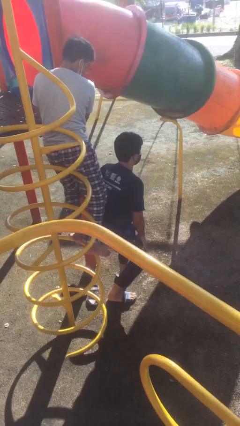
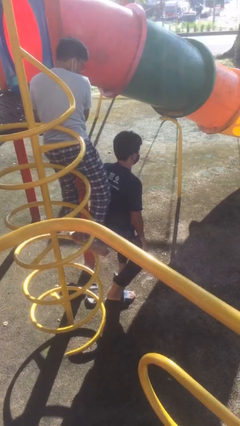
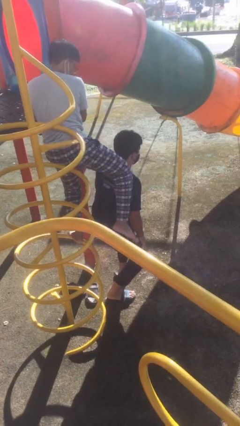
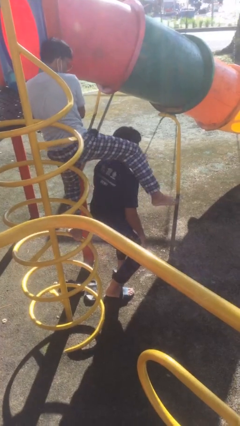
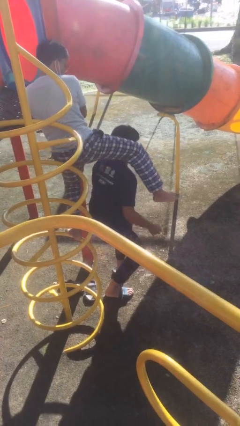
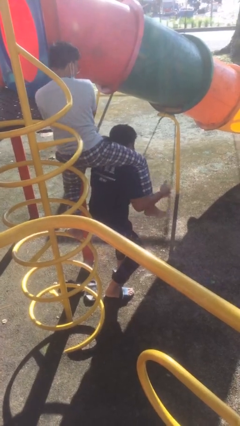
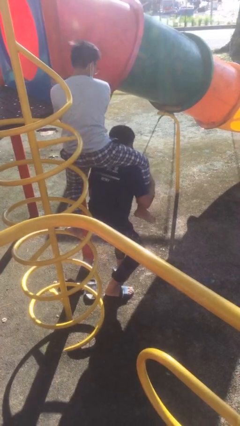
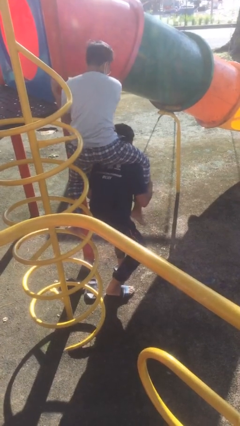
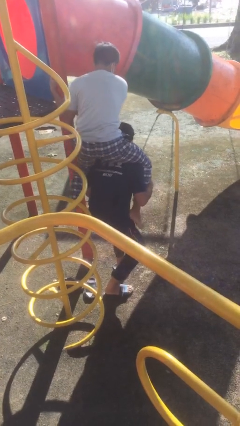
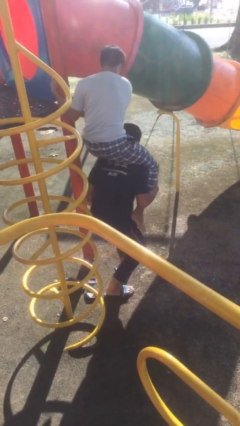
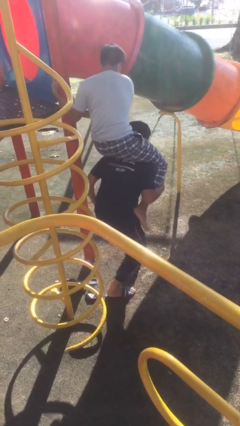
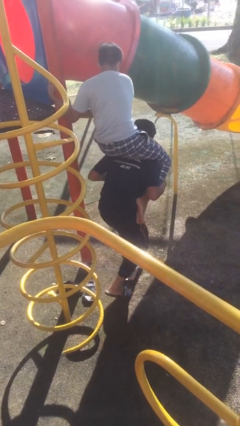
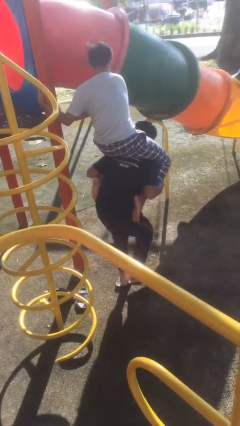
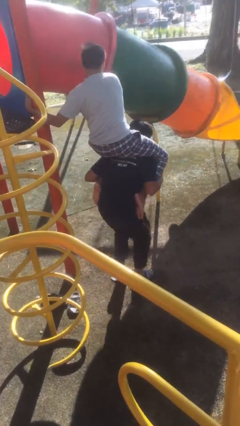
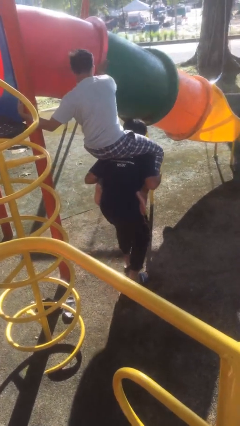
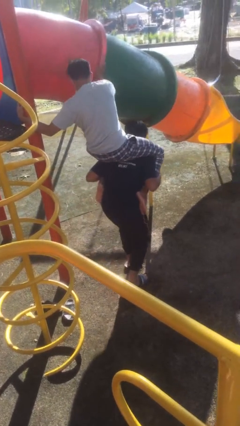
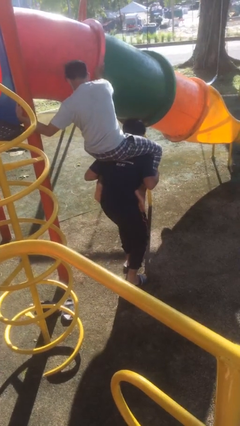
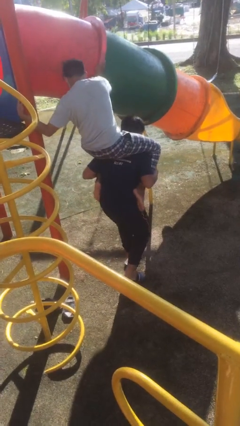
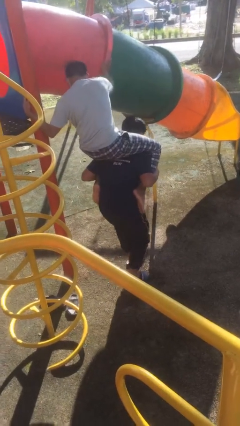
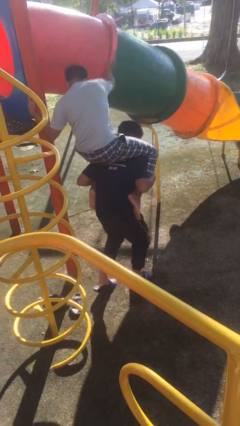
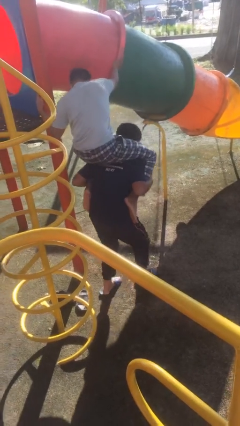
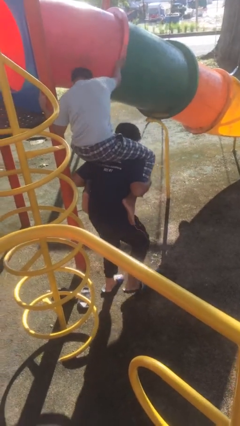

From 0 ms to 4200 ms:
person carries person on shoulders

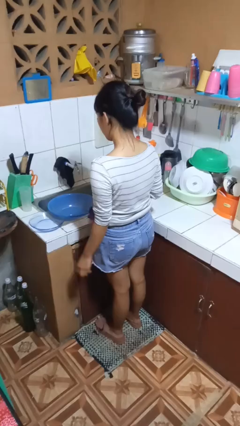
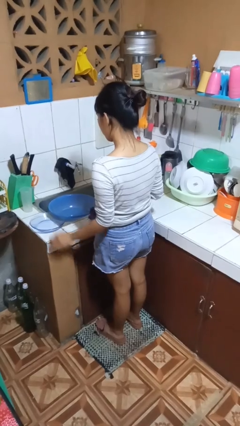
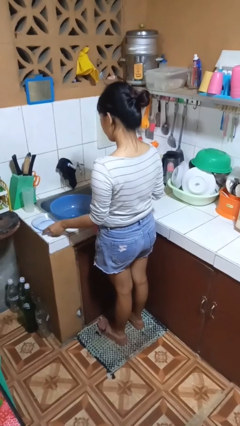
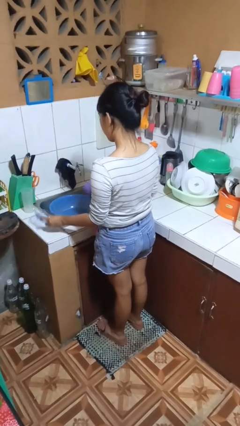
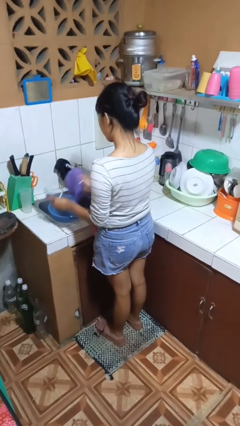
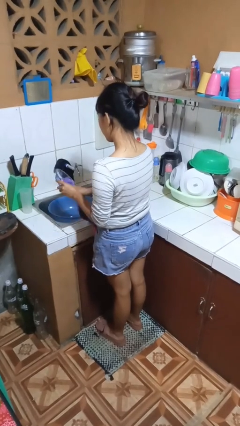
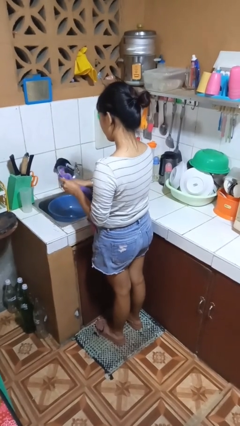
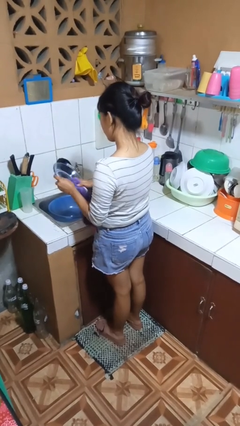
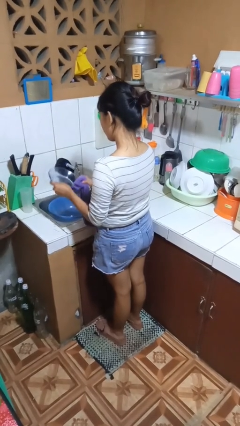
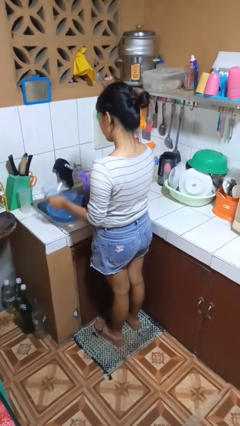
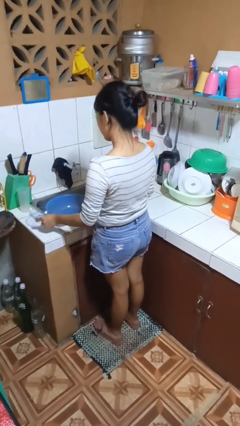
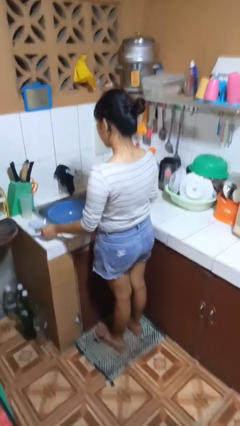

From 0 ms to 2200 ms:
person dries dish

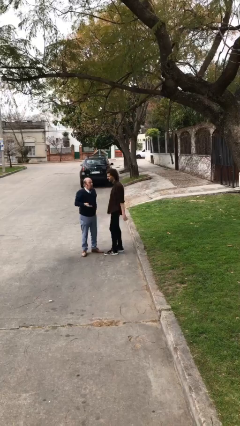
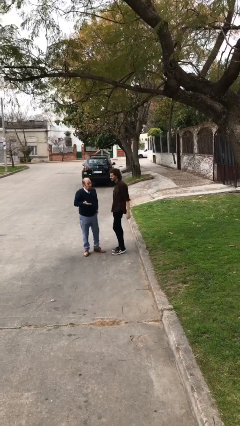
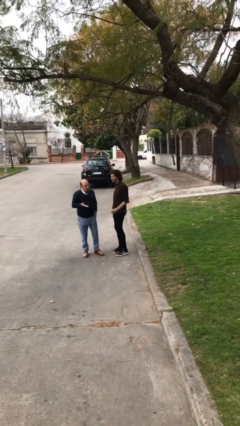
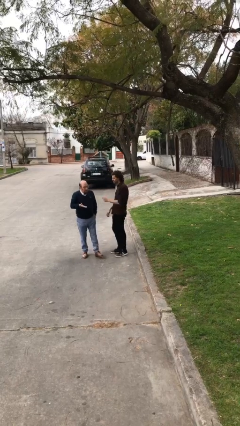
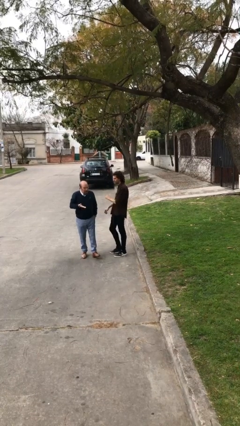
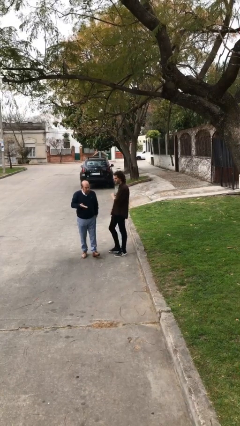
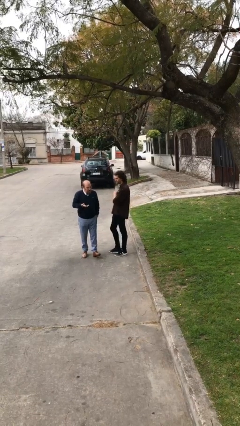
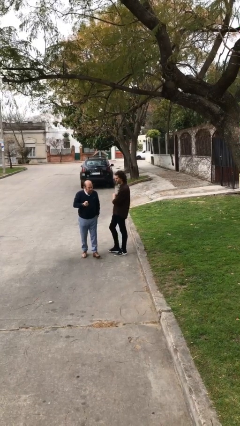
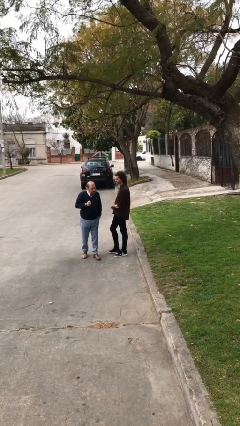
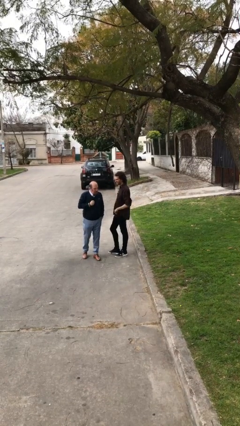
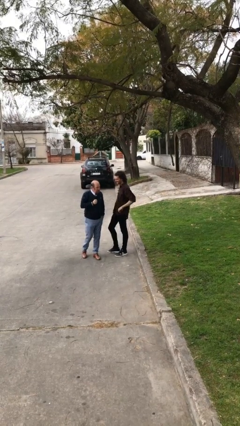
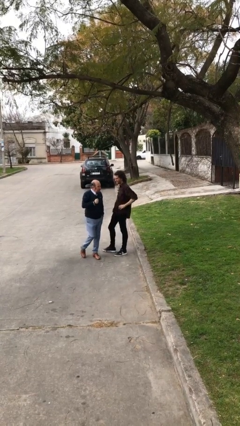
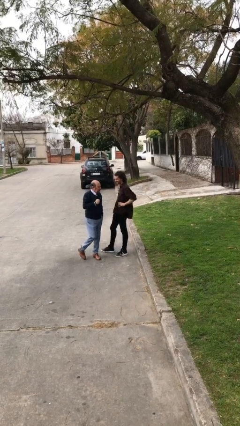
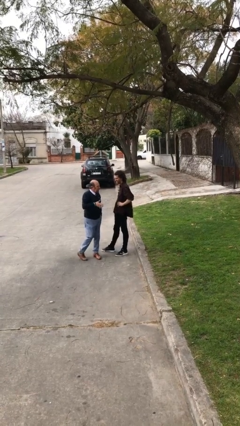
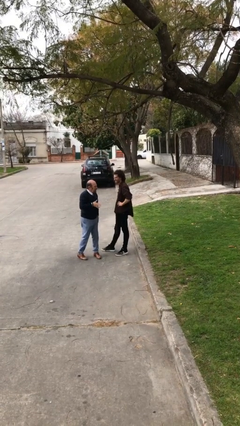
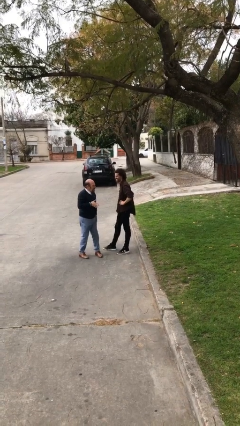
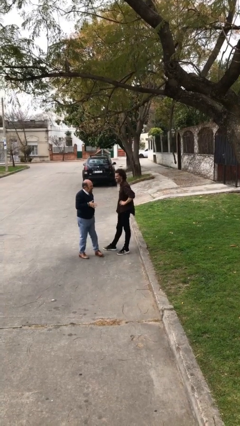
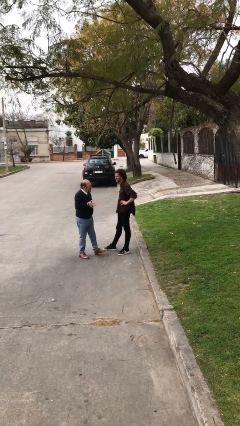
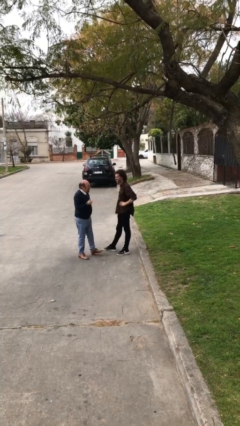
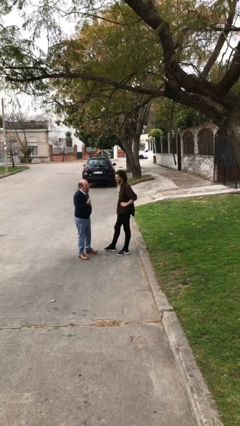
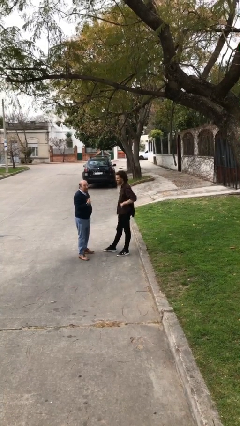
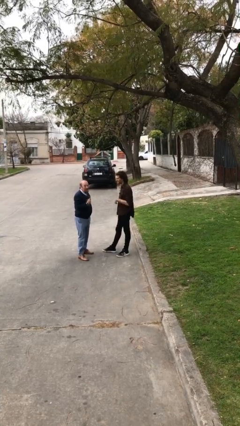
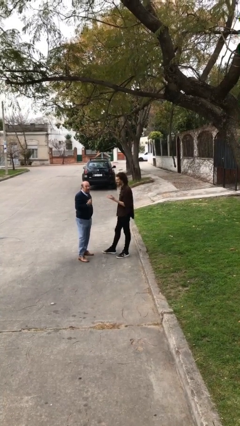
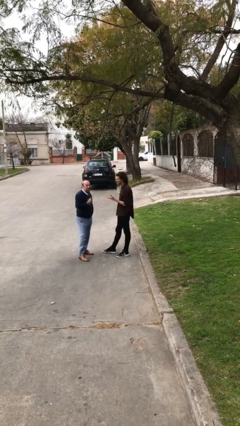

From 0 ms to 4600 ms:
person talks to person

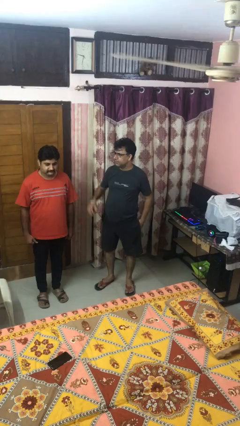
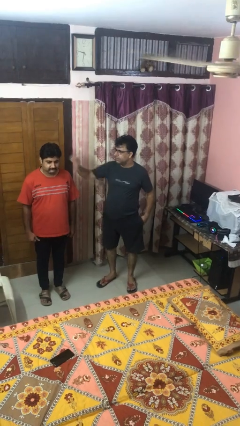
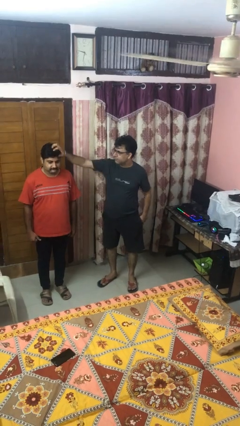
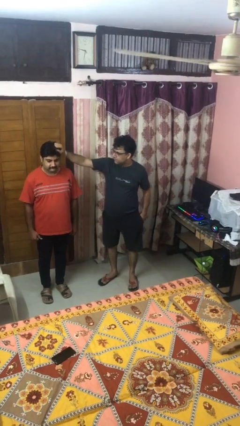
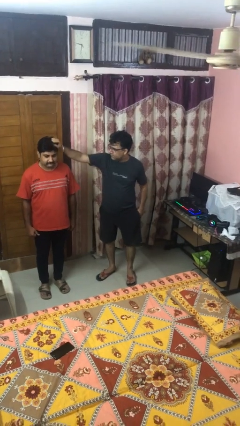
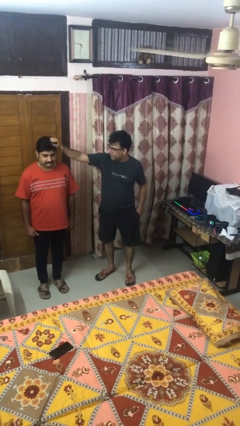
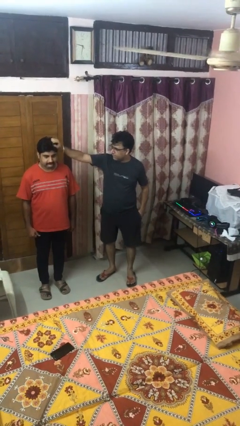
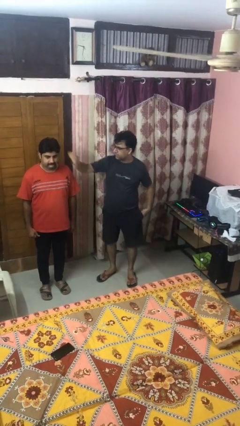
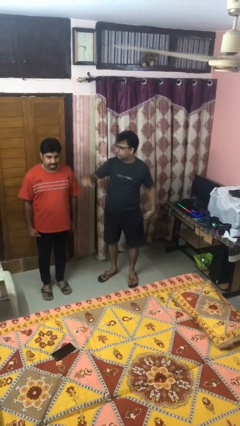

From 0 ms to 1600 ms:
person grabs person by hair

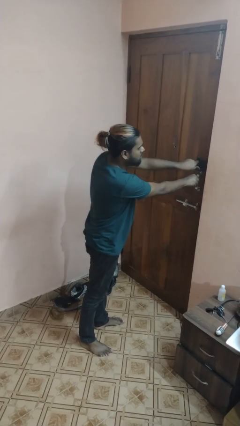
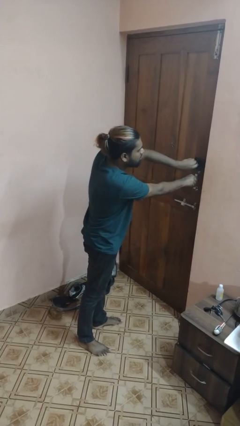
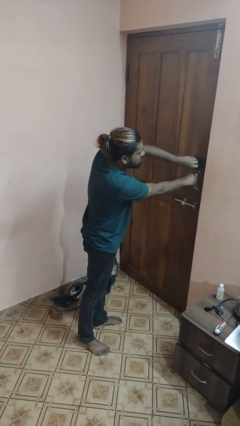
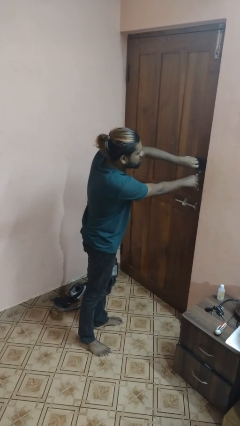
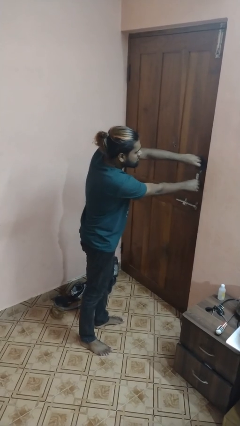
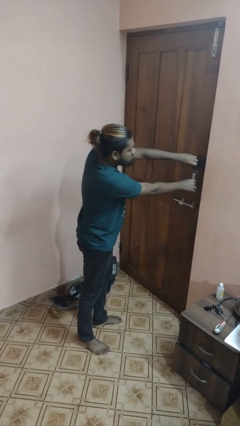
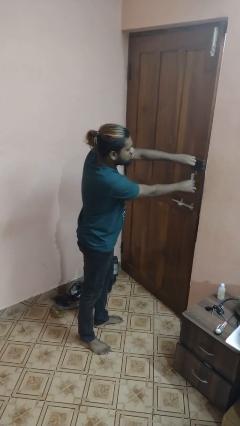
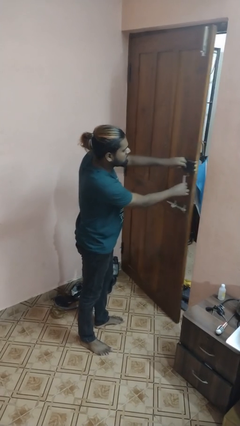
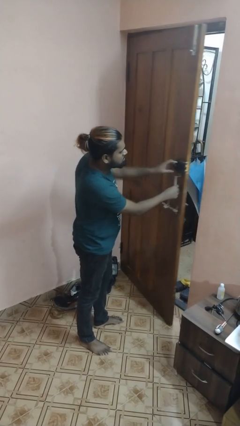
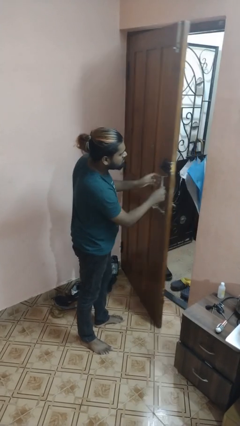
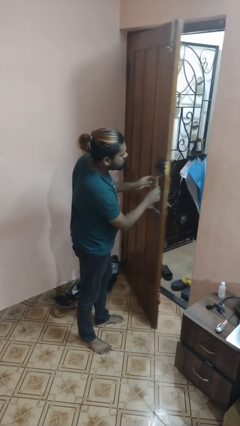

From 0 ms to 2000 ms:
person unlocks door with keys

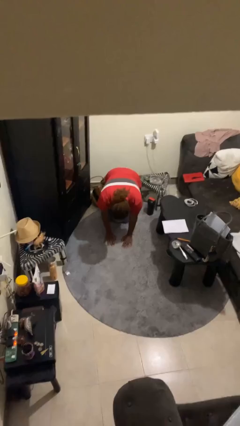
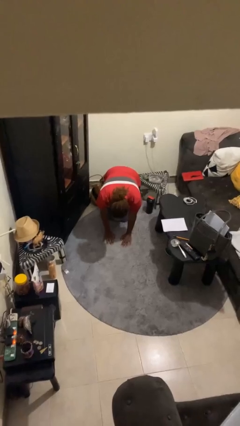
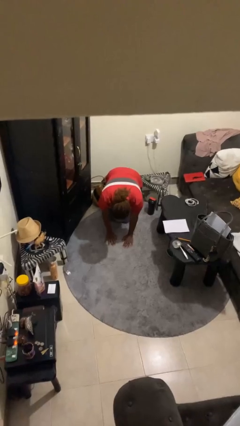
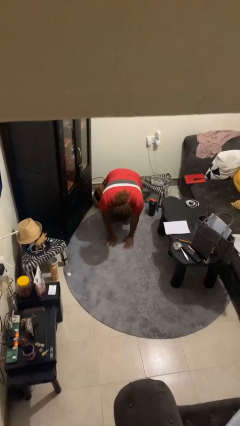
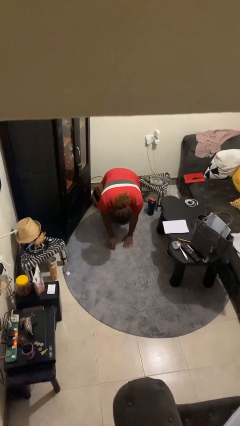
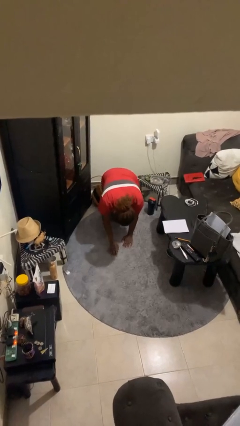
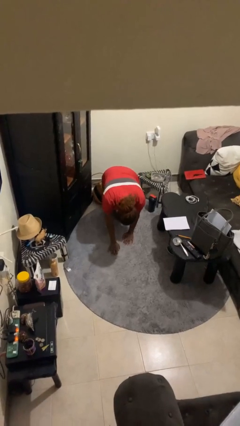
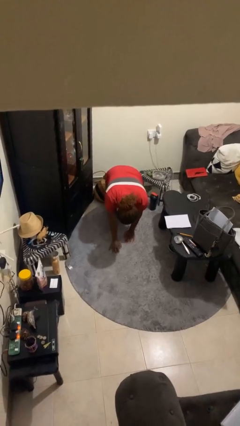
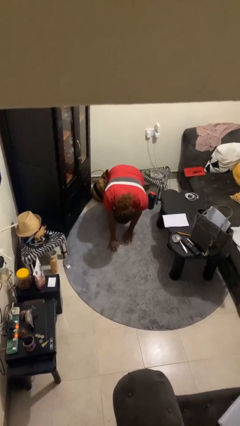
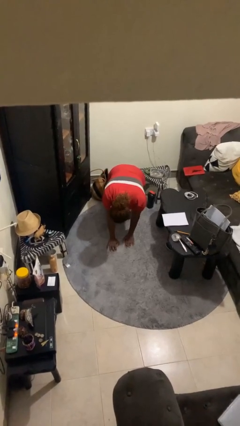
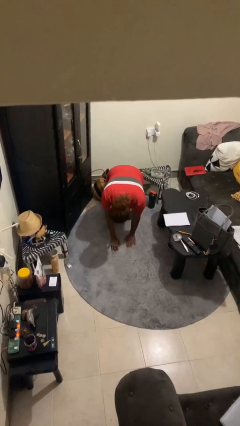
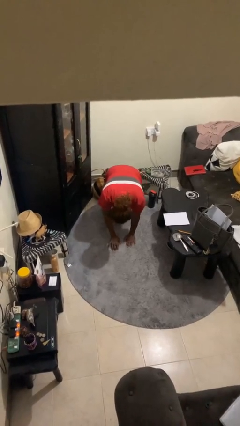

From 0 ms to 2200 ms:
person crawls

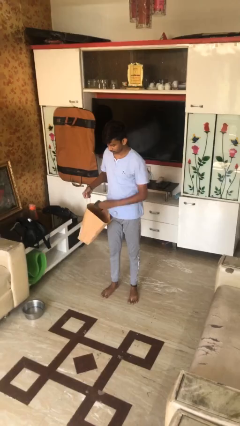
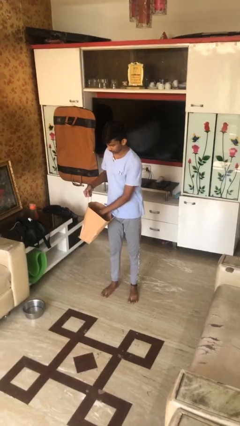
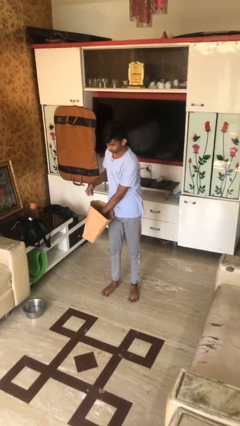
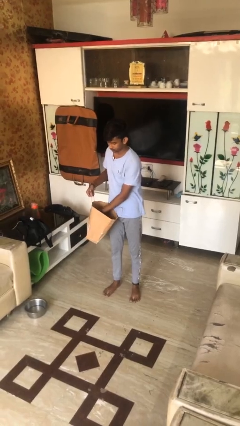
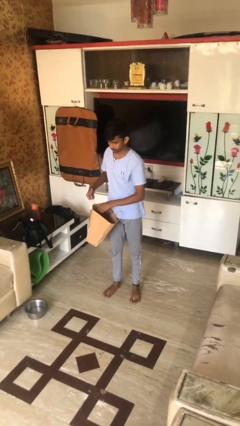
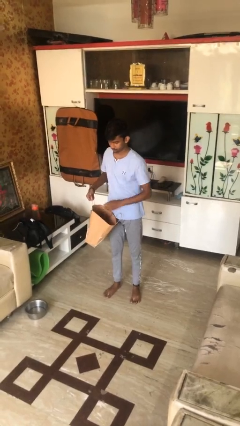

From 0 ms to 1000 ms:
person puts object into bag
